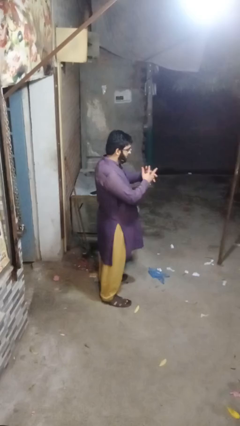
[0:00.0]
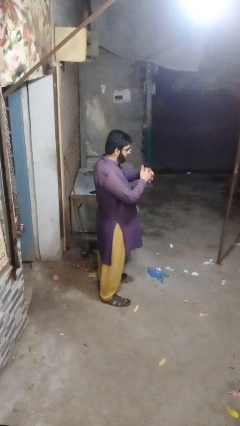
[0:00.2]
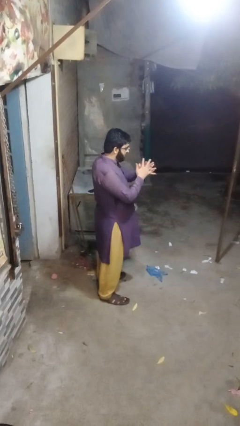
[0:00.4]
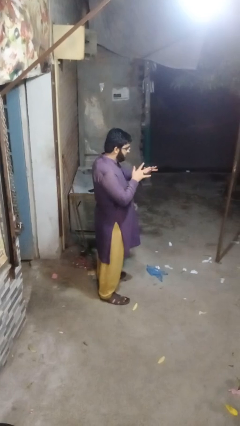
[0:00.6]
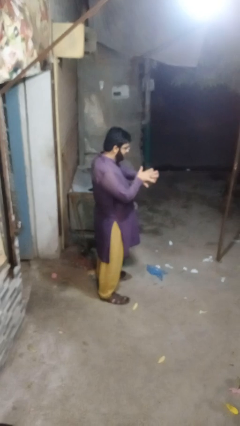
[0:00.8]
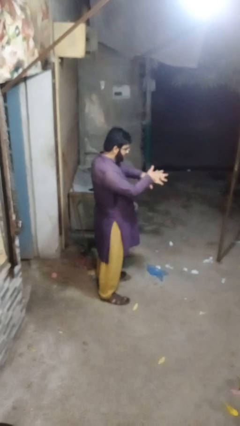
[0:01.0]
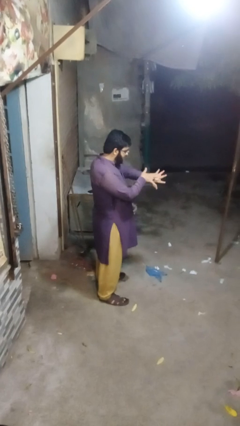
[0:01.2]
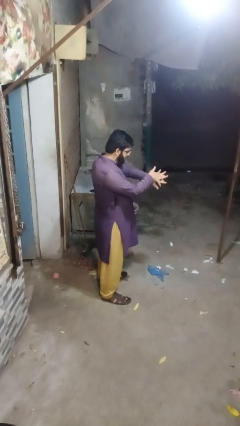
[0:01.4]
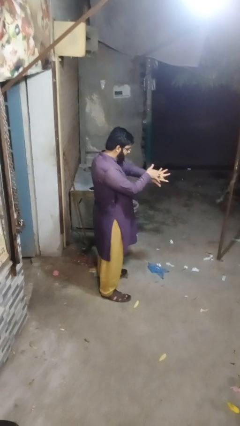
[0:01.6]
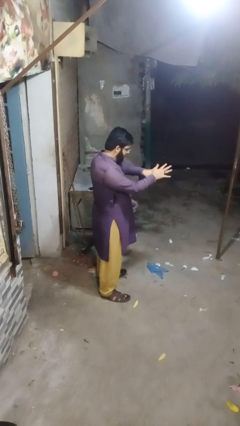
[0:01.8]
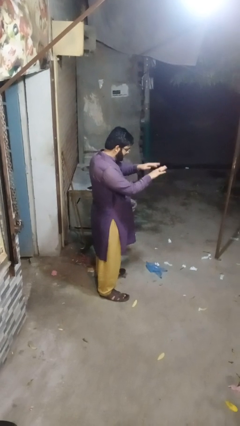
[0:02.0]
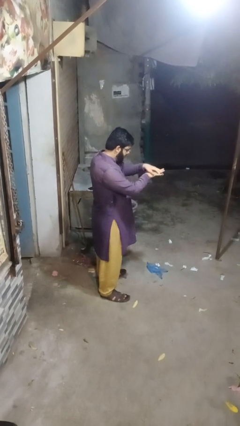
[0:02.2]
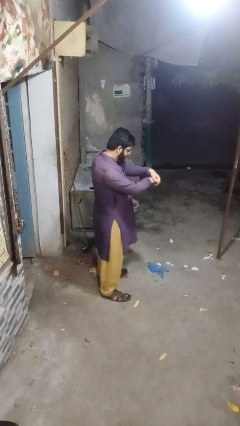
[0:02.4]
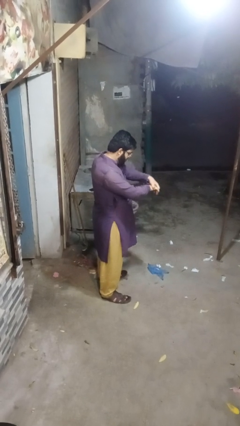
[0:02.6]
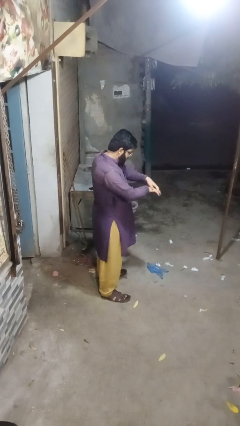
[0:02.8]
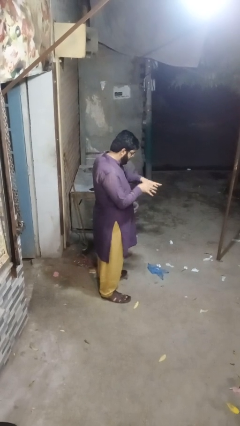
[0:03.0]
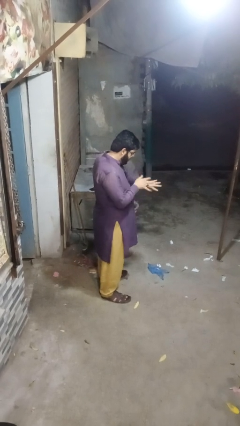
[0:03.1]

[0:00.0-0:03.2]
person cracks knuckles

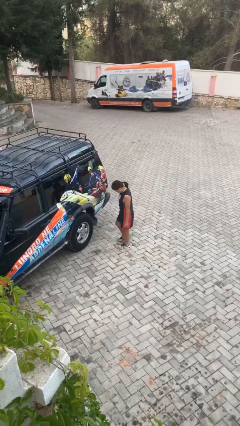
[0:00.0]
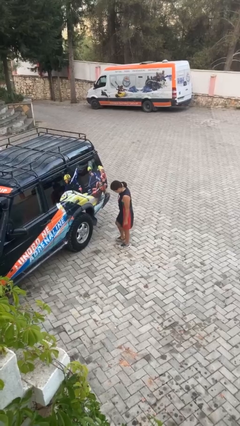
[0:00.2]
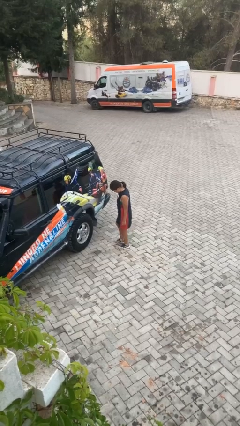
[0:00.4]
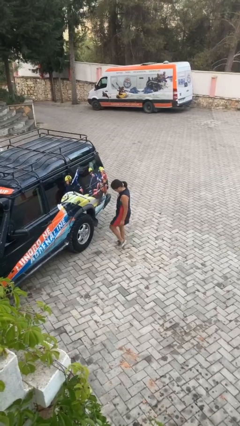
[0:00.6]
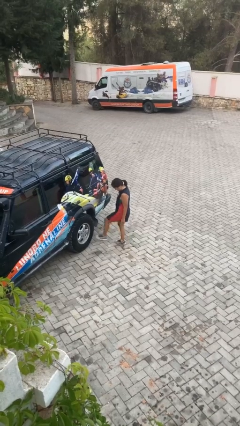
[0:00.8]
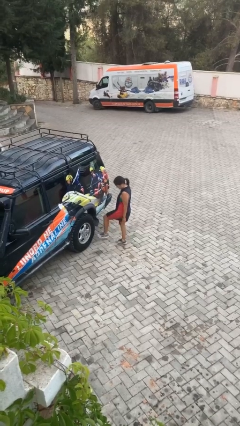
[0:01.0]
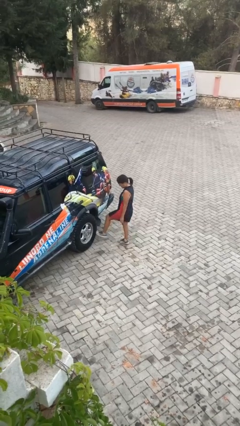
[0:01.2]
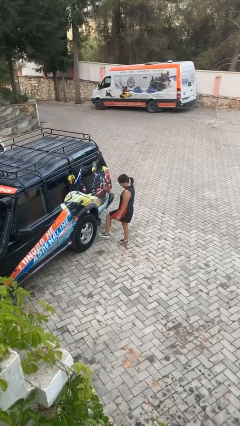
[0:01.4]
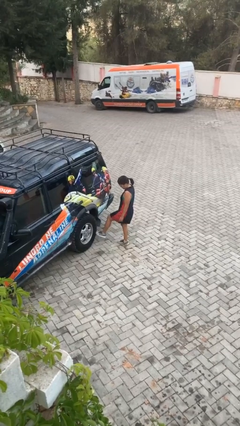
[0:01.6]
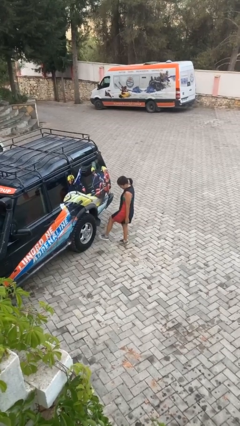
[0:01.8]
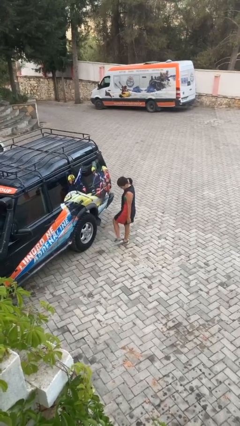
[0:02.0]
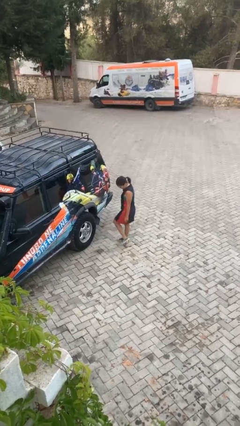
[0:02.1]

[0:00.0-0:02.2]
person kicks car tires

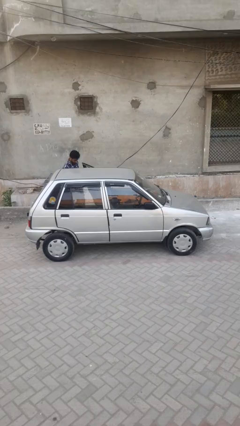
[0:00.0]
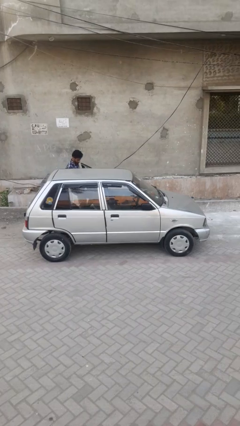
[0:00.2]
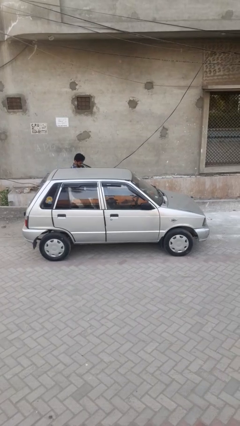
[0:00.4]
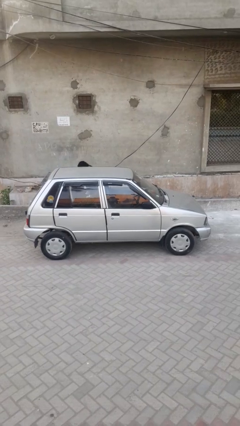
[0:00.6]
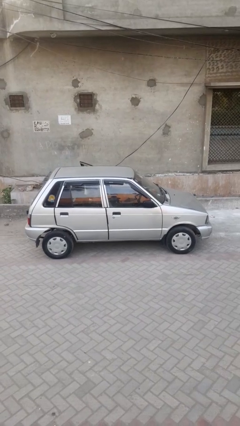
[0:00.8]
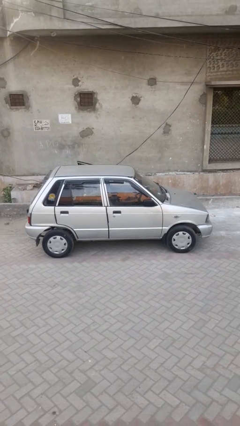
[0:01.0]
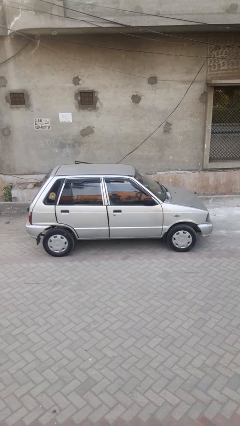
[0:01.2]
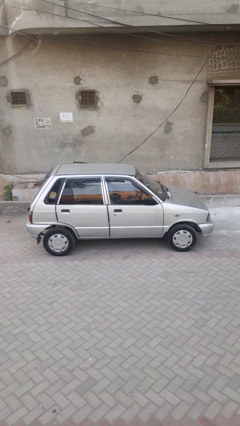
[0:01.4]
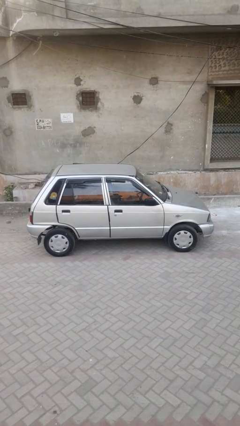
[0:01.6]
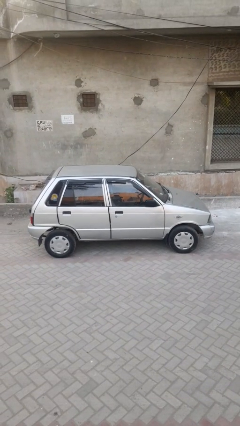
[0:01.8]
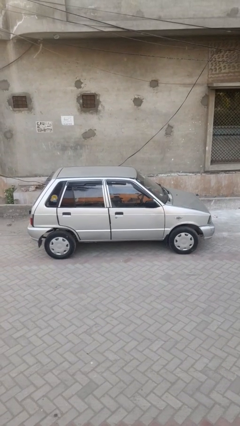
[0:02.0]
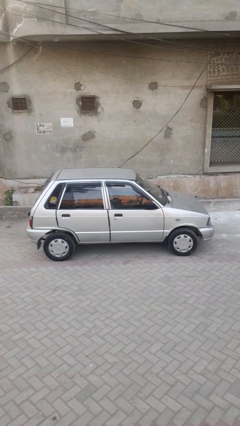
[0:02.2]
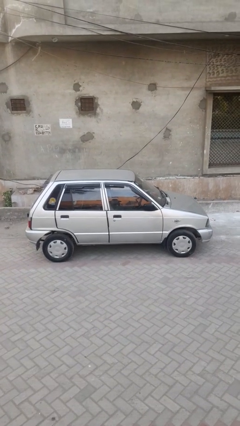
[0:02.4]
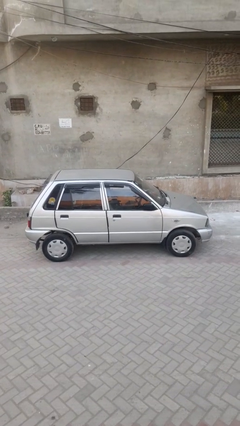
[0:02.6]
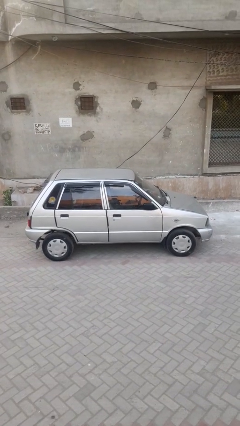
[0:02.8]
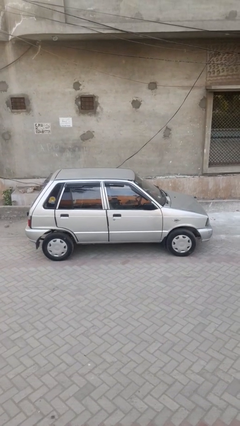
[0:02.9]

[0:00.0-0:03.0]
car picks up person

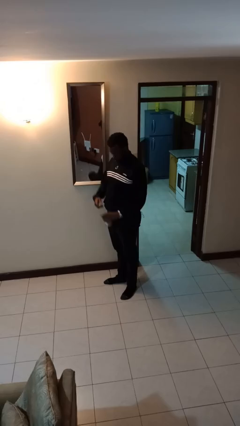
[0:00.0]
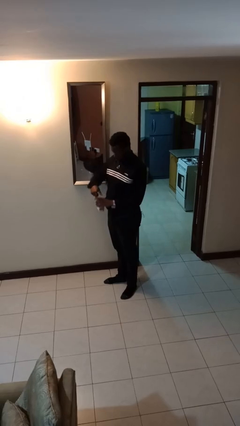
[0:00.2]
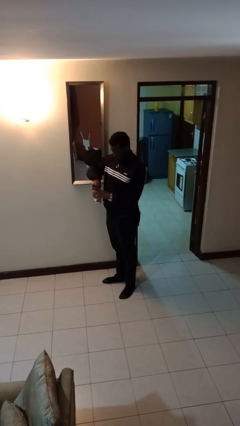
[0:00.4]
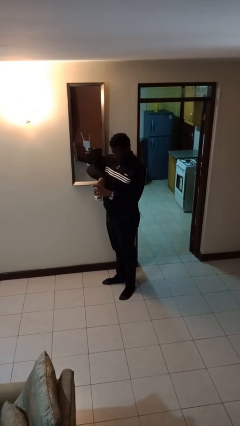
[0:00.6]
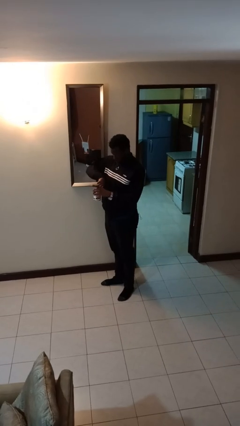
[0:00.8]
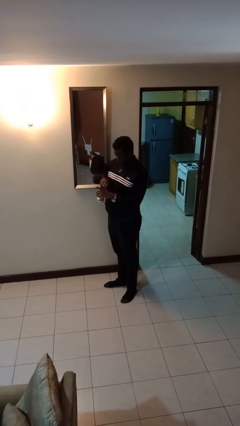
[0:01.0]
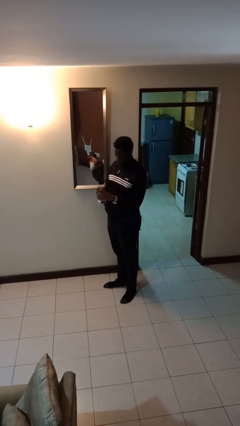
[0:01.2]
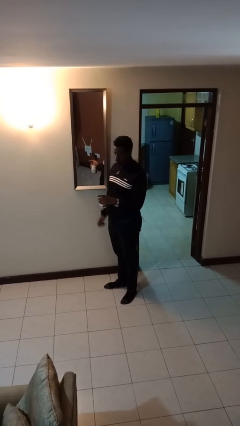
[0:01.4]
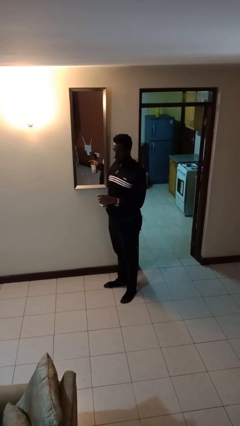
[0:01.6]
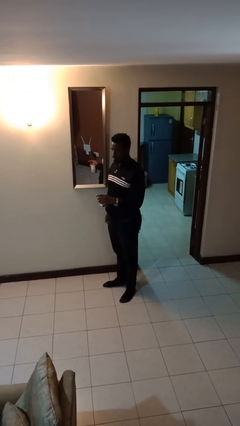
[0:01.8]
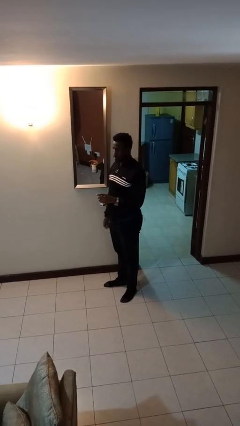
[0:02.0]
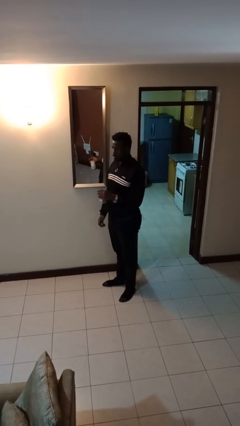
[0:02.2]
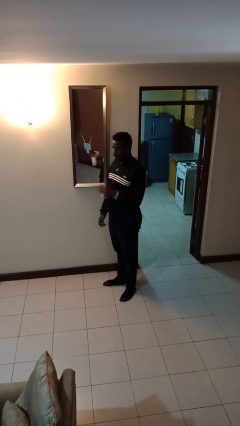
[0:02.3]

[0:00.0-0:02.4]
person opens beverage can

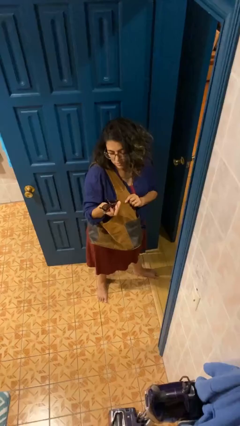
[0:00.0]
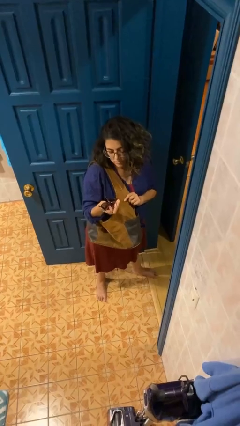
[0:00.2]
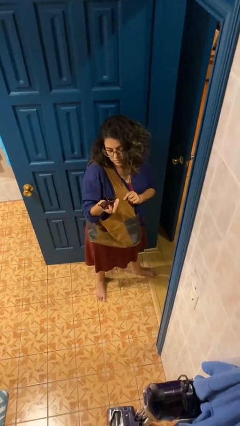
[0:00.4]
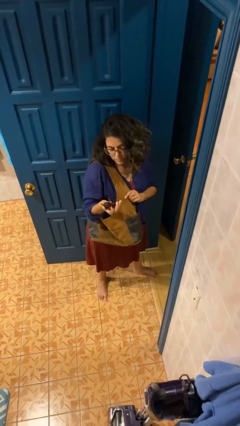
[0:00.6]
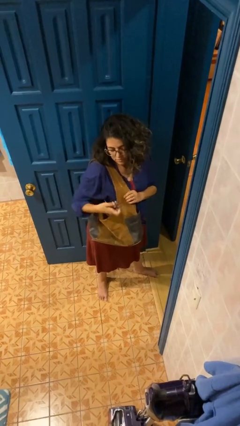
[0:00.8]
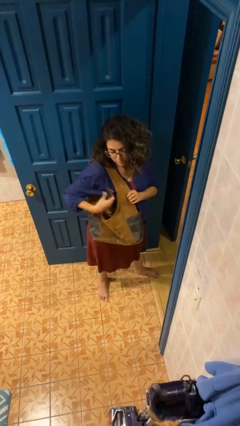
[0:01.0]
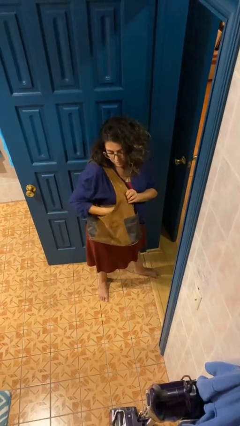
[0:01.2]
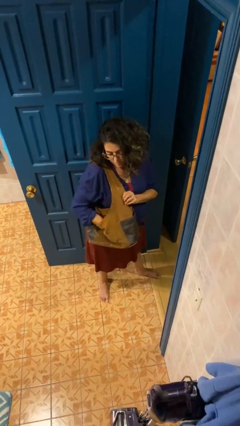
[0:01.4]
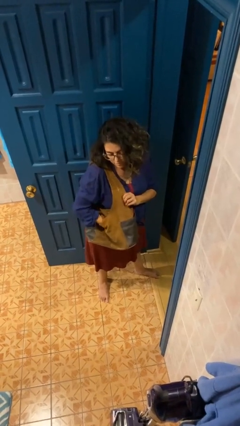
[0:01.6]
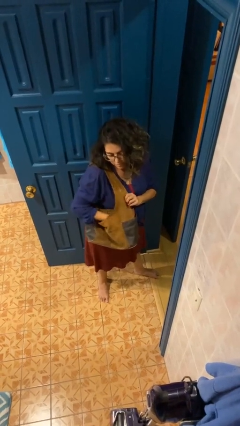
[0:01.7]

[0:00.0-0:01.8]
person puts object into purse

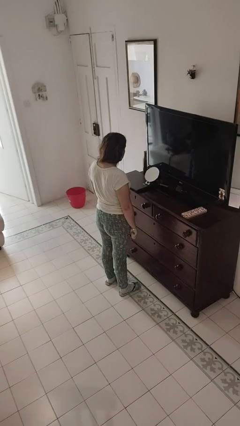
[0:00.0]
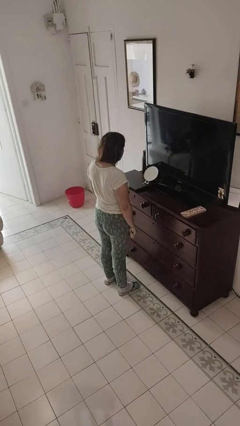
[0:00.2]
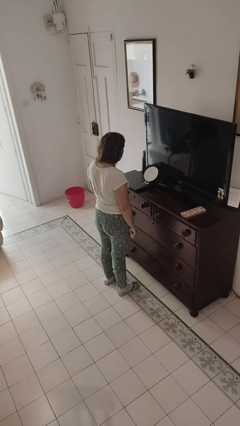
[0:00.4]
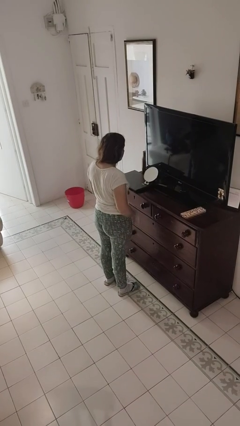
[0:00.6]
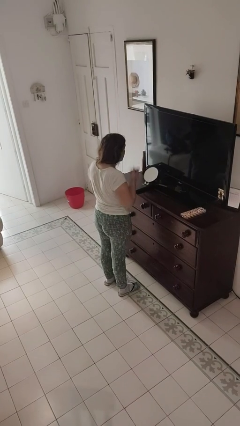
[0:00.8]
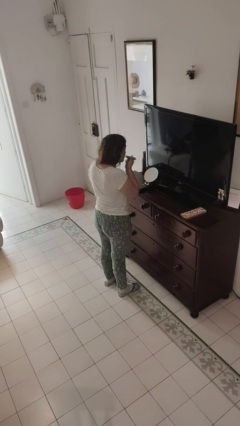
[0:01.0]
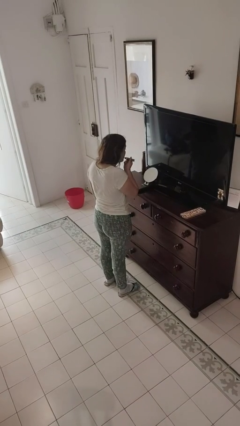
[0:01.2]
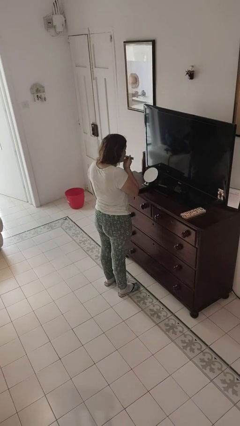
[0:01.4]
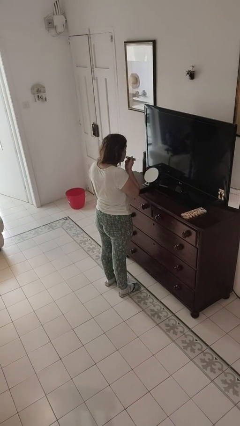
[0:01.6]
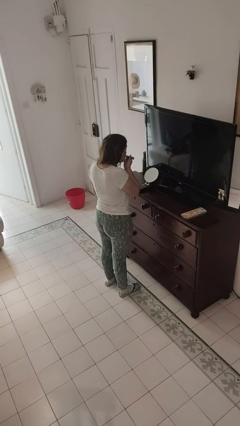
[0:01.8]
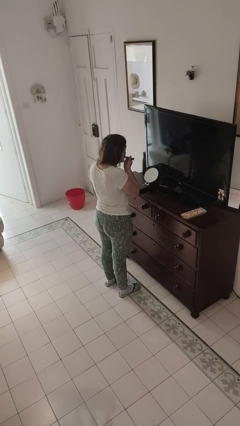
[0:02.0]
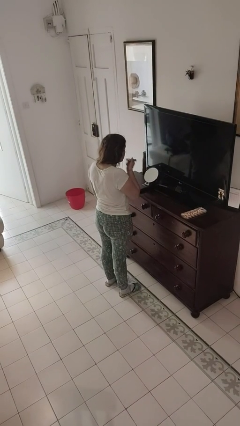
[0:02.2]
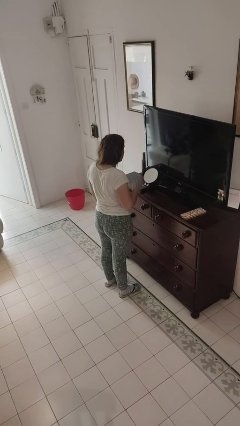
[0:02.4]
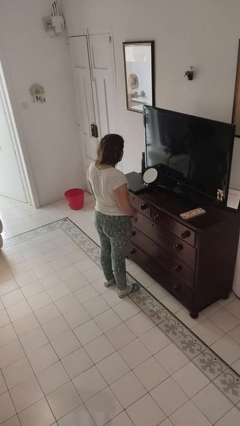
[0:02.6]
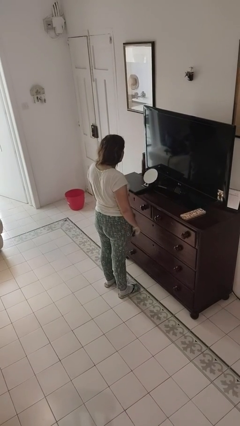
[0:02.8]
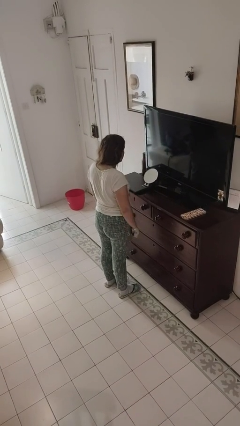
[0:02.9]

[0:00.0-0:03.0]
person applies lip makeup

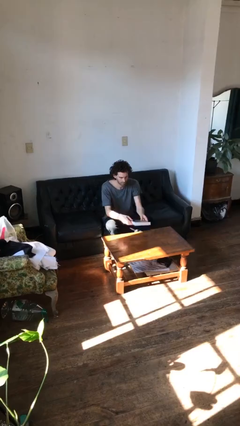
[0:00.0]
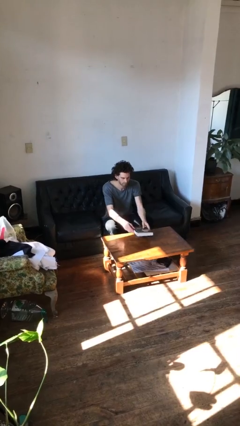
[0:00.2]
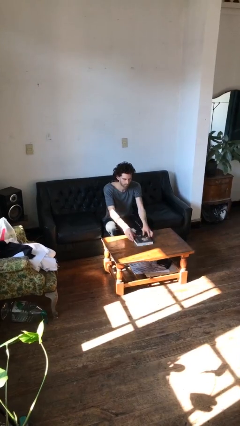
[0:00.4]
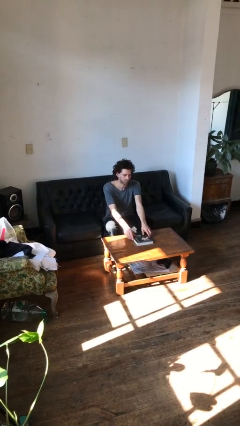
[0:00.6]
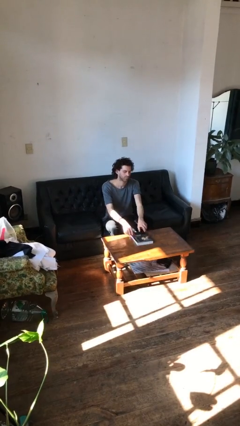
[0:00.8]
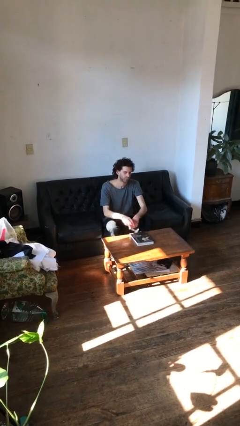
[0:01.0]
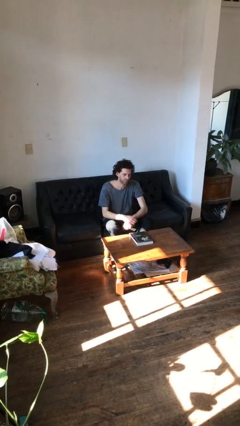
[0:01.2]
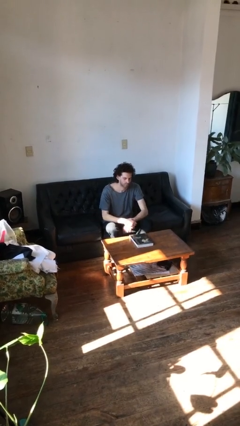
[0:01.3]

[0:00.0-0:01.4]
person puts down object on table
